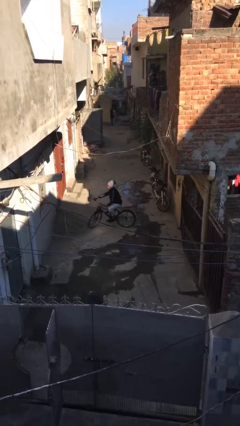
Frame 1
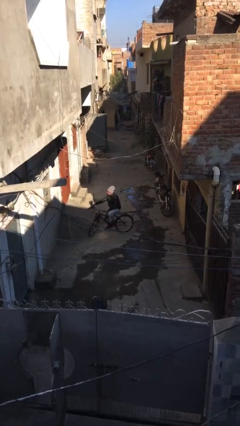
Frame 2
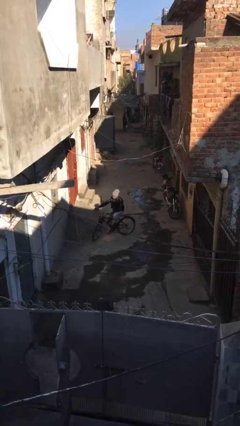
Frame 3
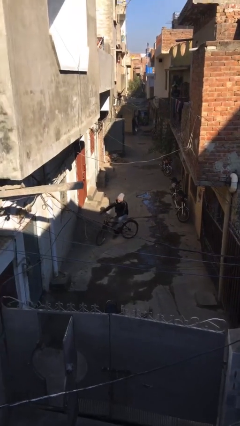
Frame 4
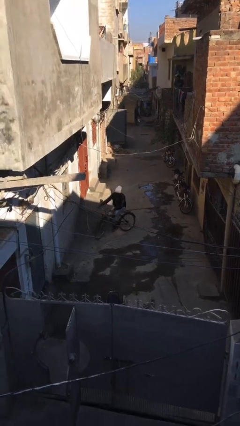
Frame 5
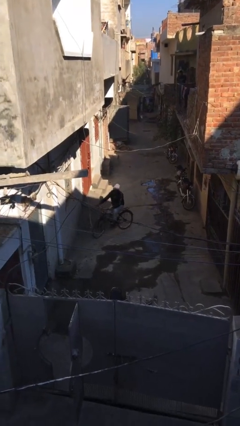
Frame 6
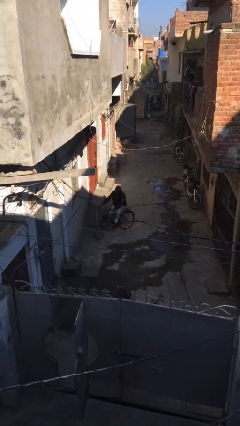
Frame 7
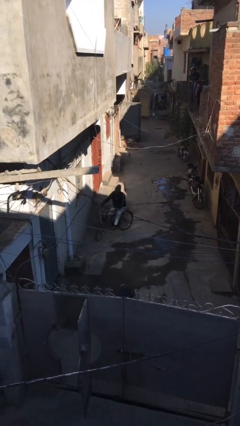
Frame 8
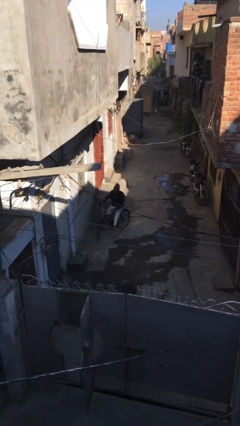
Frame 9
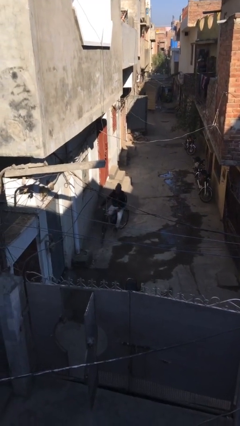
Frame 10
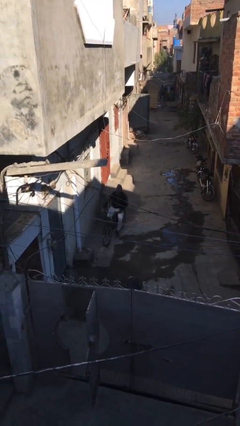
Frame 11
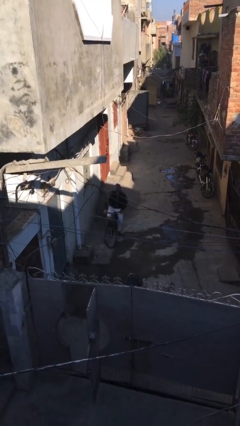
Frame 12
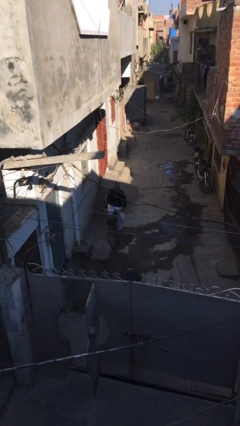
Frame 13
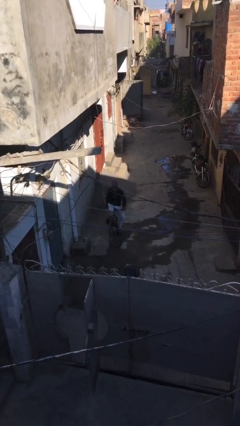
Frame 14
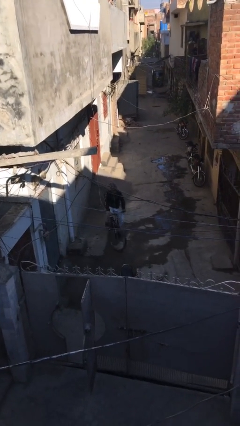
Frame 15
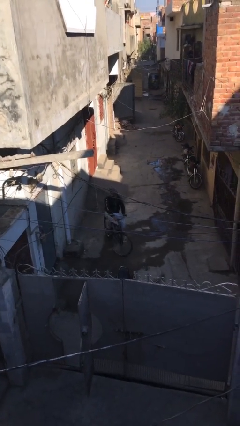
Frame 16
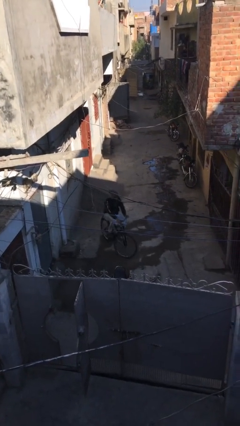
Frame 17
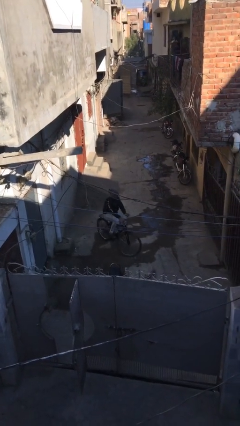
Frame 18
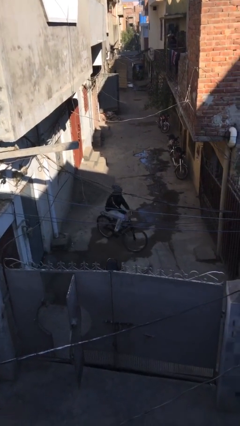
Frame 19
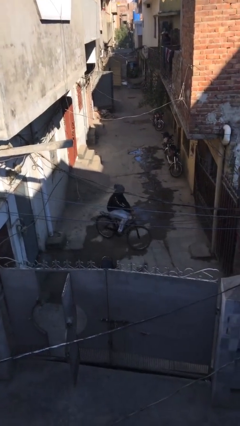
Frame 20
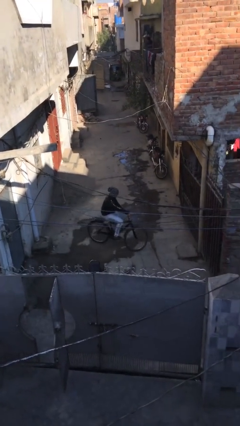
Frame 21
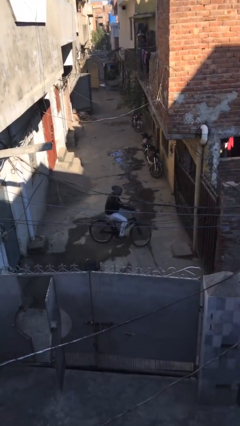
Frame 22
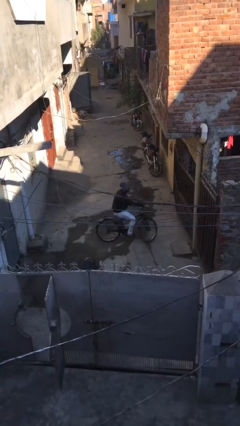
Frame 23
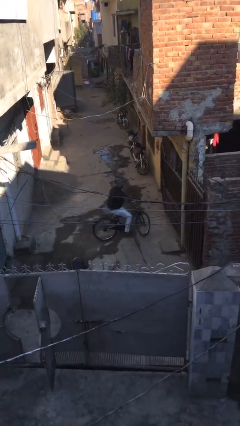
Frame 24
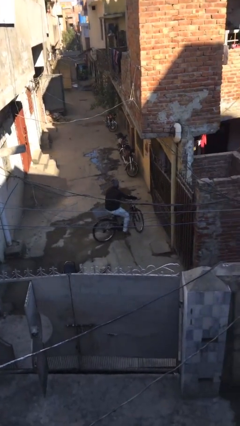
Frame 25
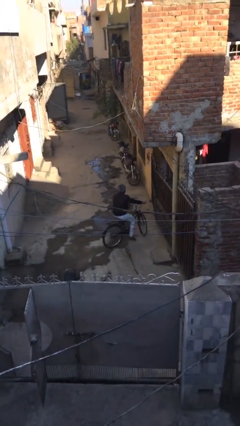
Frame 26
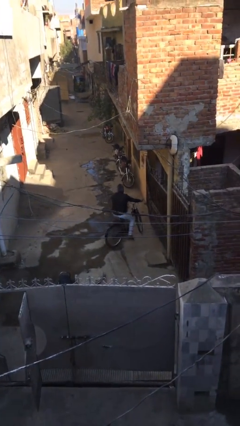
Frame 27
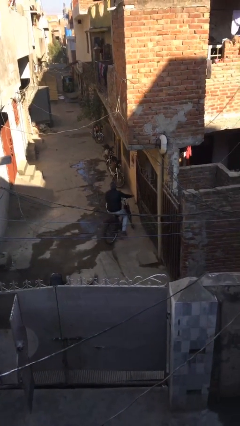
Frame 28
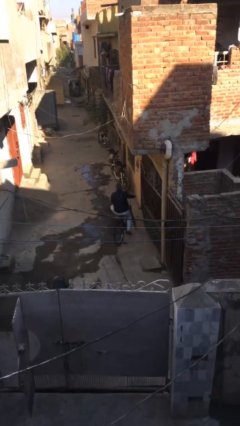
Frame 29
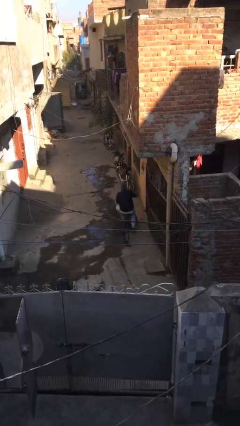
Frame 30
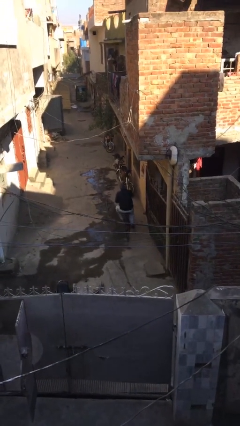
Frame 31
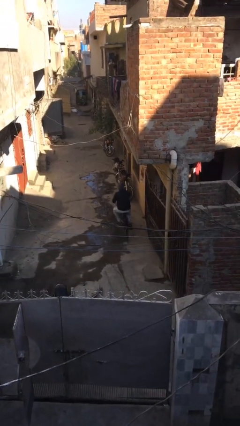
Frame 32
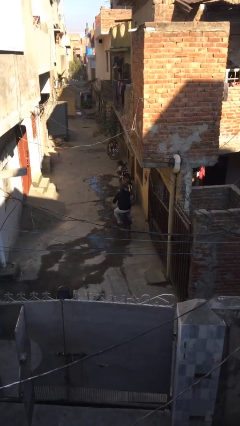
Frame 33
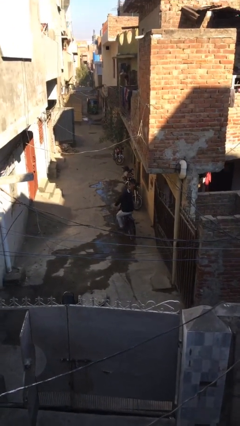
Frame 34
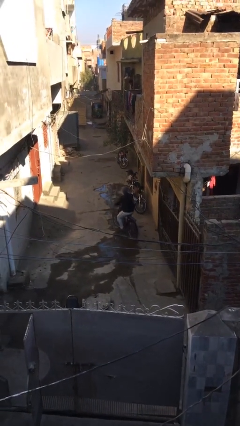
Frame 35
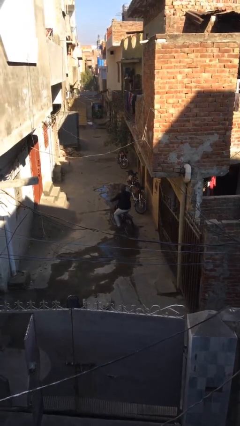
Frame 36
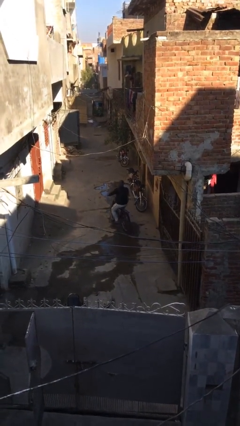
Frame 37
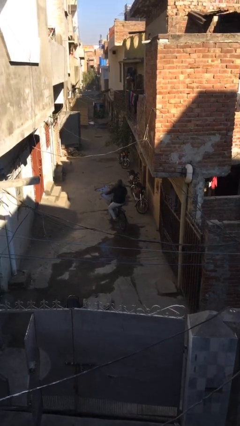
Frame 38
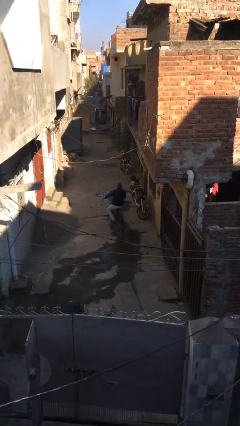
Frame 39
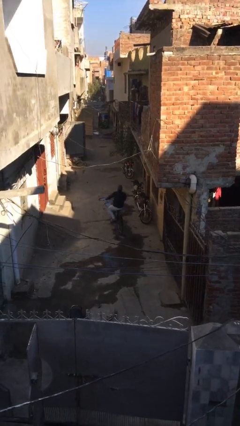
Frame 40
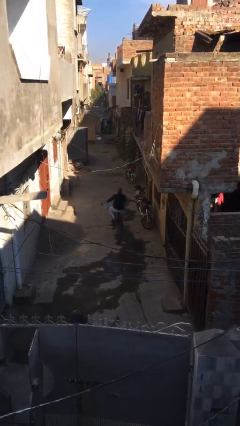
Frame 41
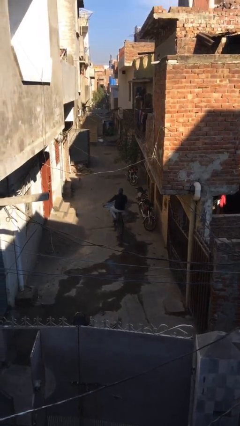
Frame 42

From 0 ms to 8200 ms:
person rides bicycle

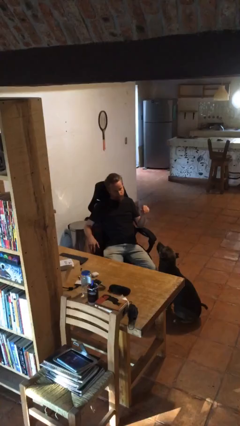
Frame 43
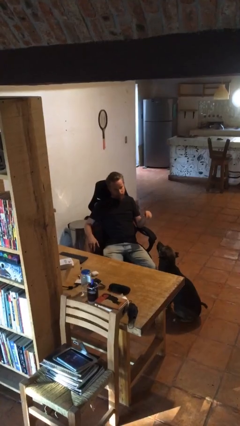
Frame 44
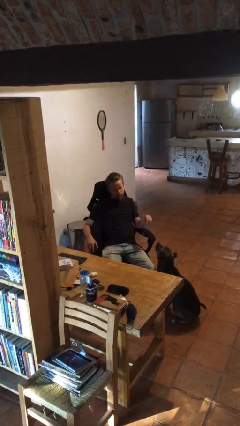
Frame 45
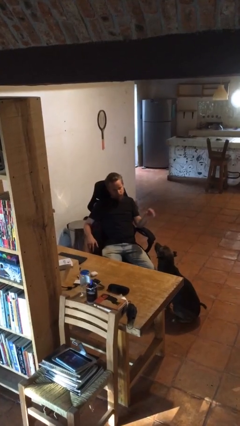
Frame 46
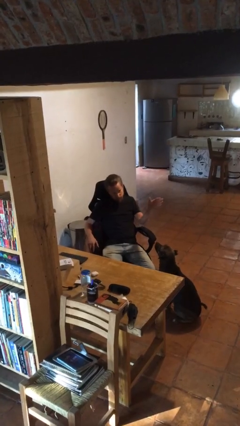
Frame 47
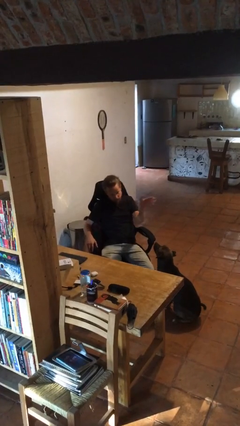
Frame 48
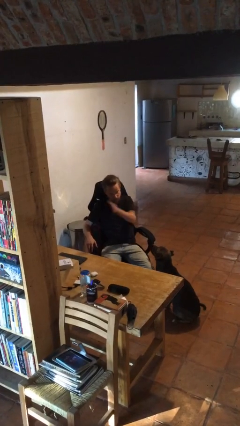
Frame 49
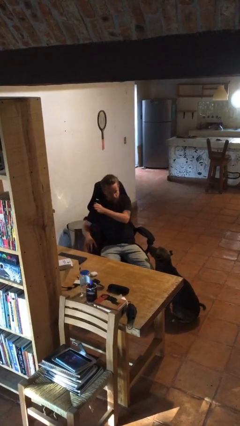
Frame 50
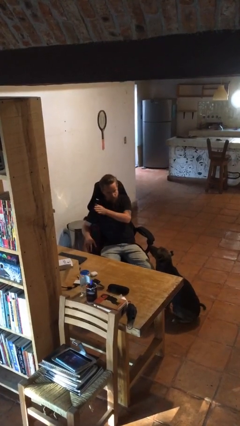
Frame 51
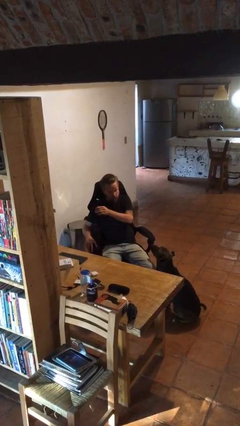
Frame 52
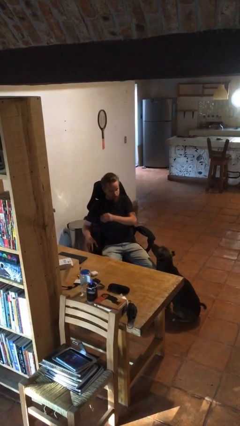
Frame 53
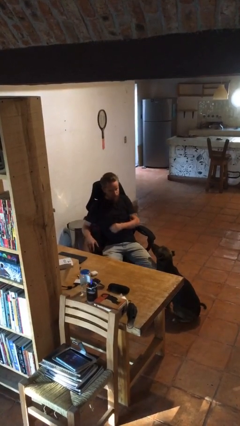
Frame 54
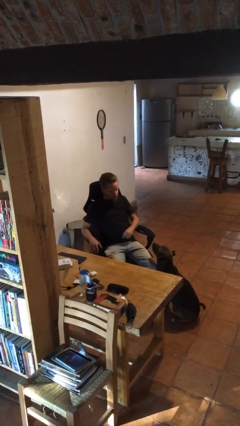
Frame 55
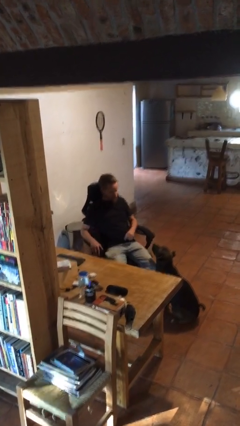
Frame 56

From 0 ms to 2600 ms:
person gestures swipe right

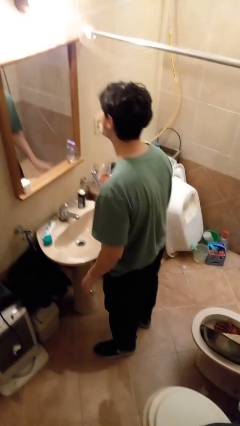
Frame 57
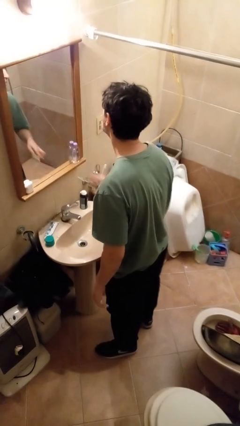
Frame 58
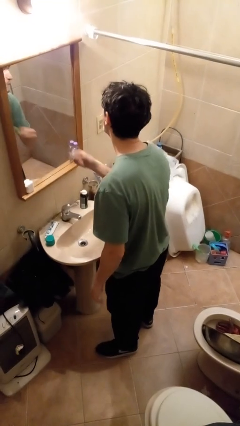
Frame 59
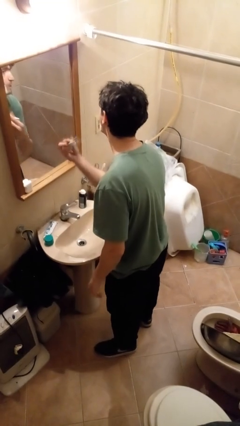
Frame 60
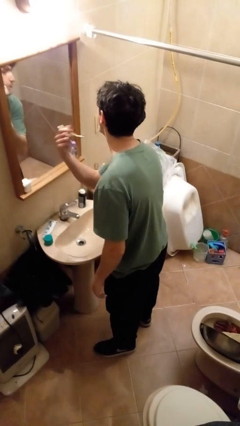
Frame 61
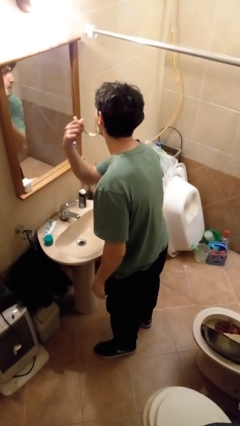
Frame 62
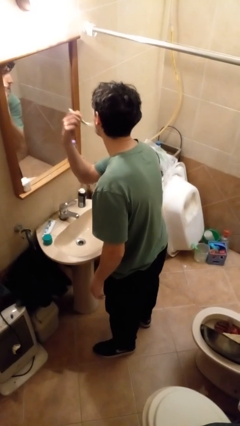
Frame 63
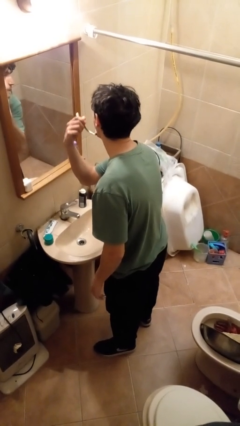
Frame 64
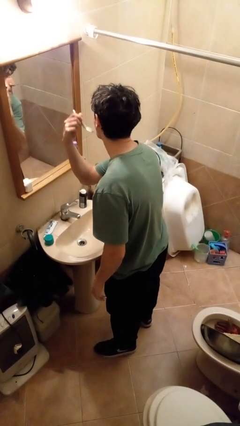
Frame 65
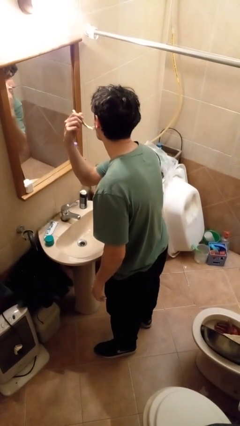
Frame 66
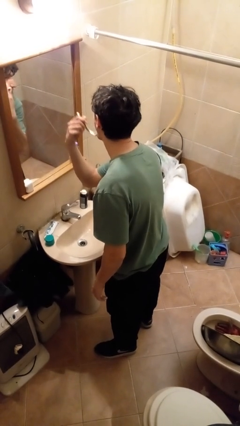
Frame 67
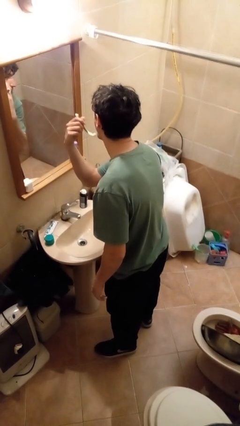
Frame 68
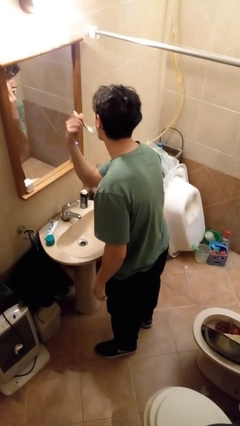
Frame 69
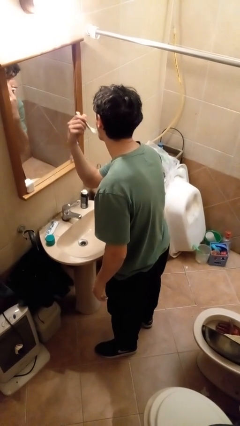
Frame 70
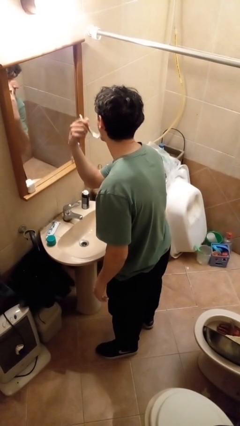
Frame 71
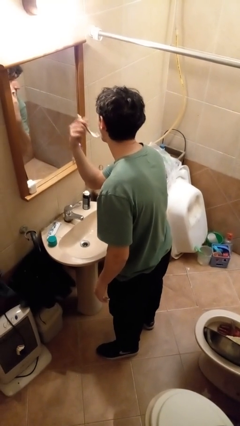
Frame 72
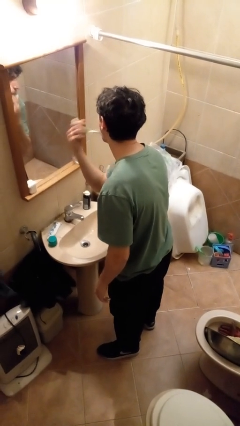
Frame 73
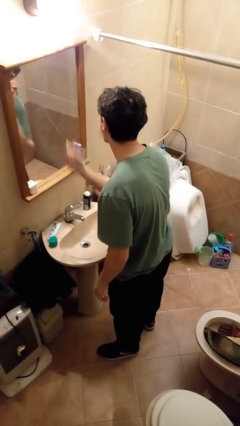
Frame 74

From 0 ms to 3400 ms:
person shaves face

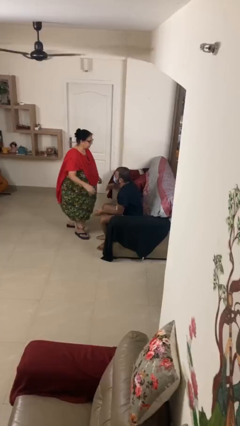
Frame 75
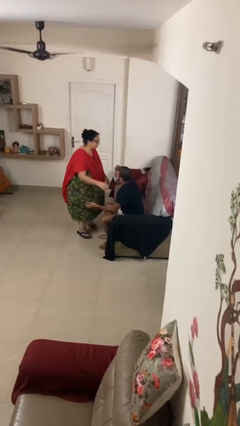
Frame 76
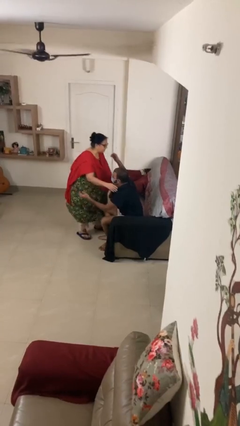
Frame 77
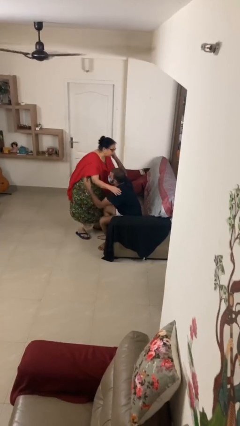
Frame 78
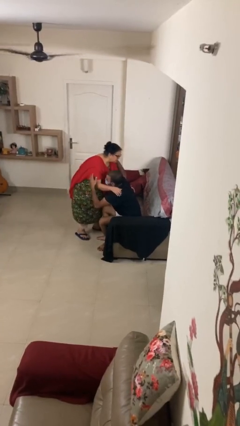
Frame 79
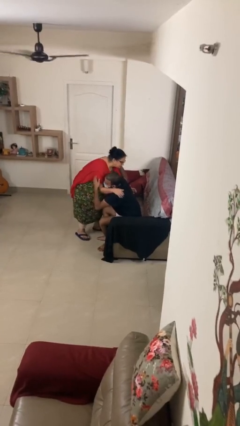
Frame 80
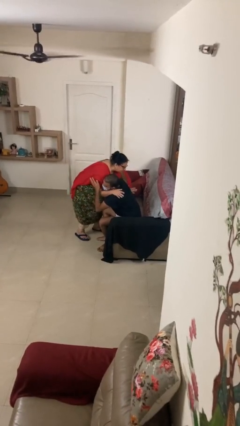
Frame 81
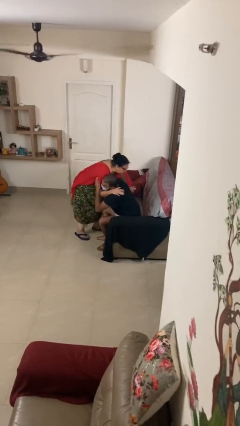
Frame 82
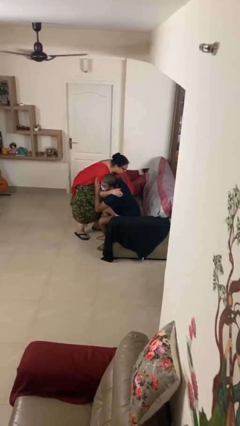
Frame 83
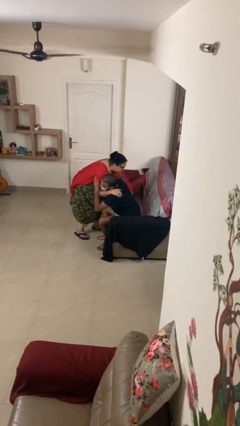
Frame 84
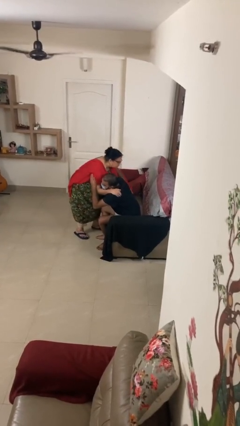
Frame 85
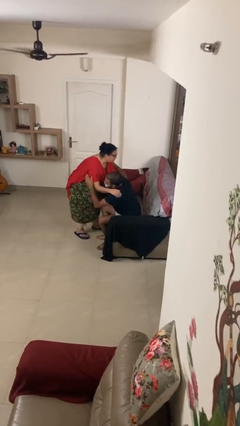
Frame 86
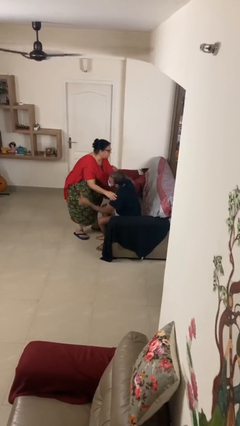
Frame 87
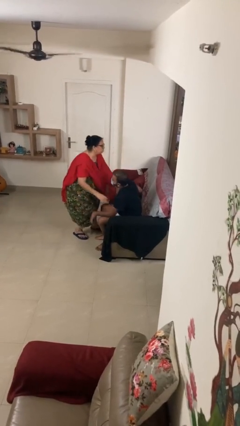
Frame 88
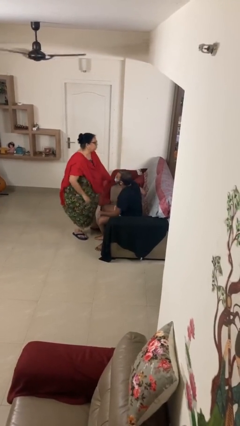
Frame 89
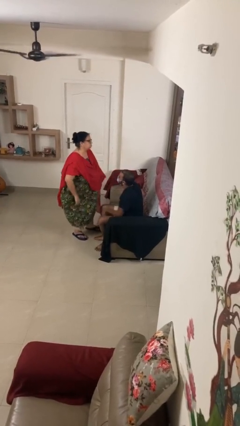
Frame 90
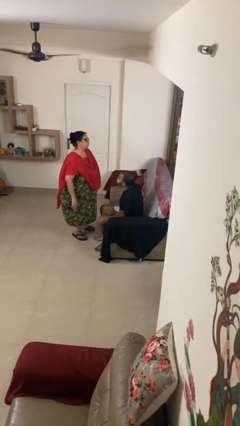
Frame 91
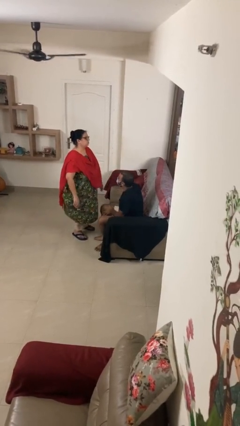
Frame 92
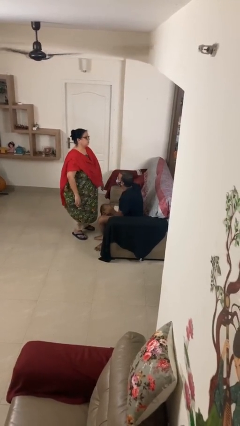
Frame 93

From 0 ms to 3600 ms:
person embraces person
